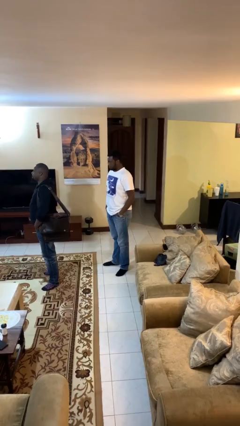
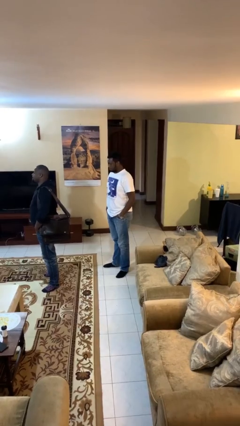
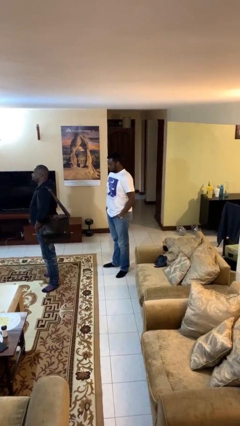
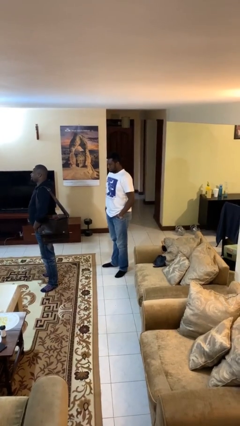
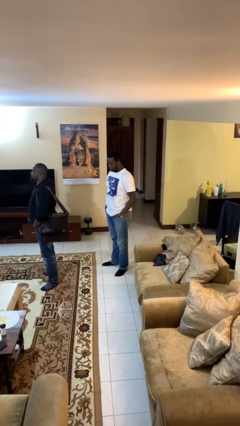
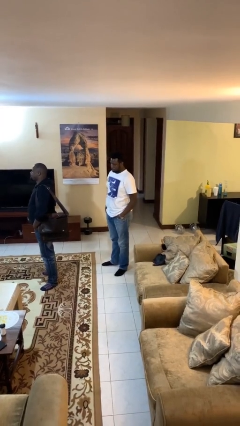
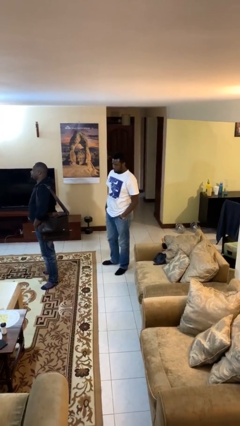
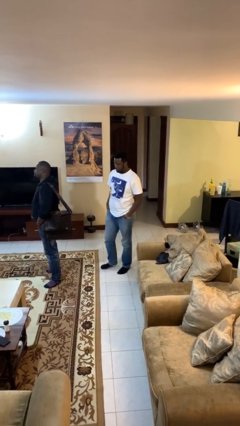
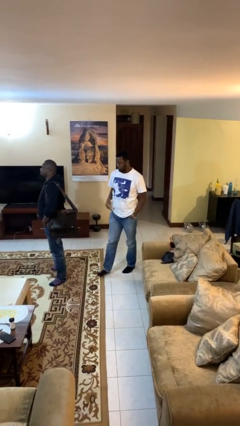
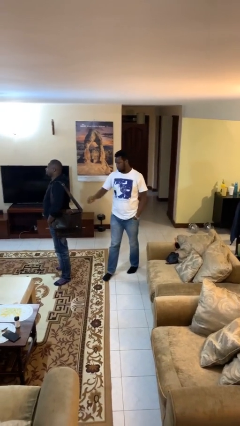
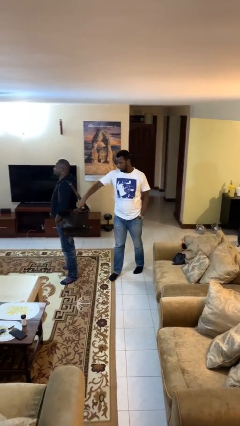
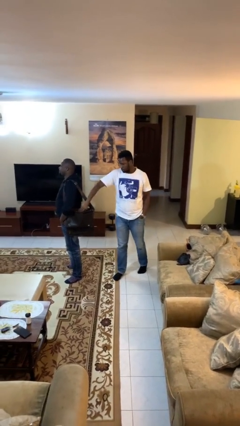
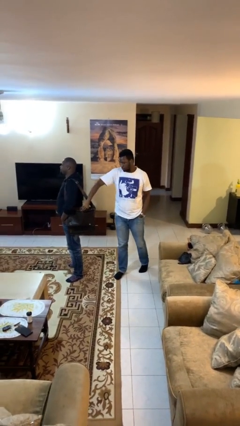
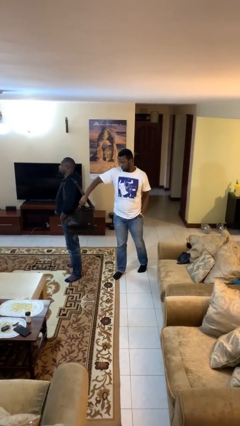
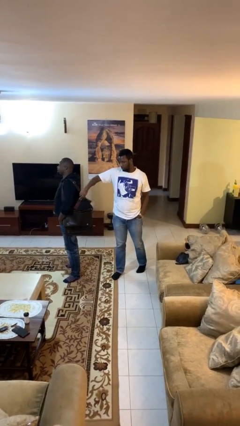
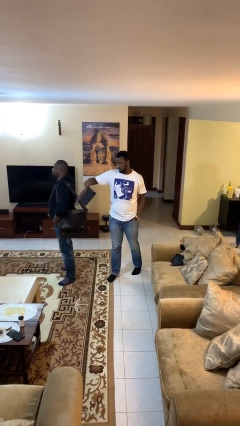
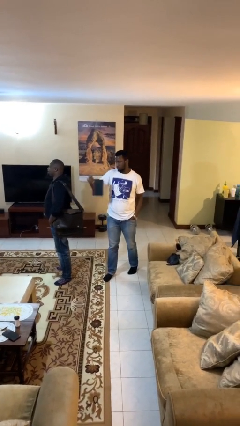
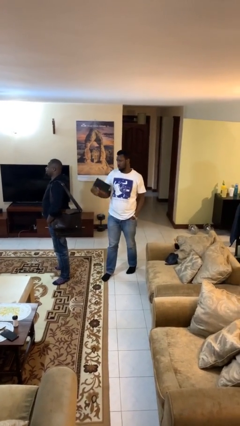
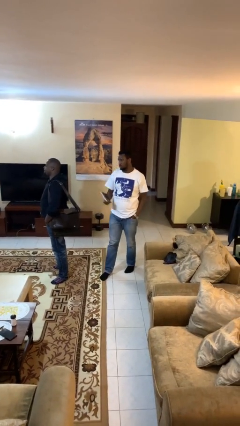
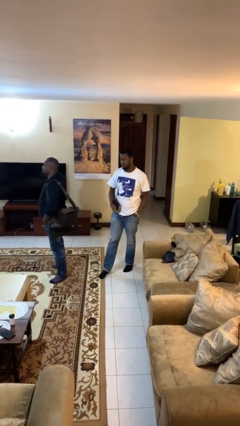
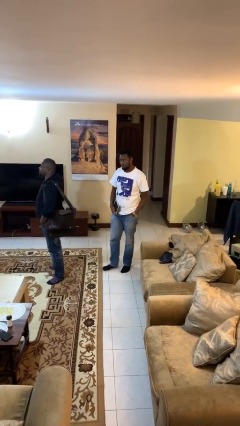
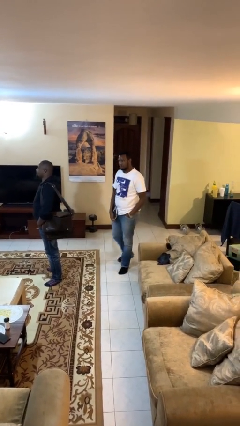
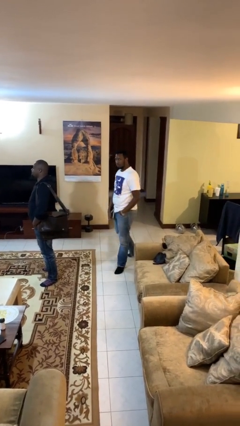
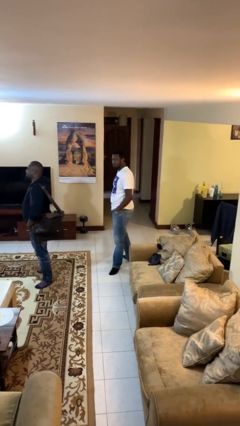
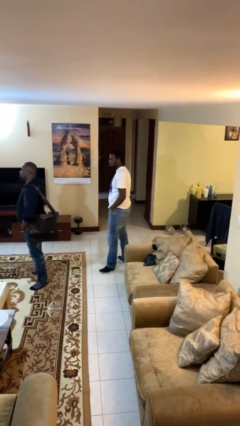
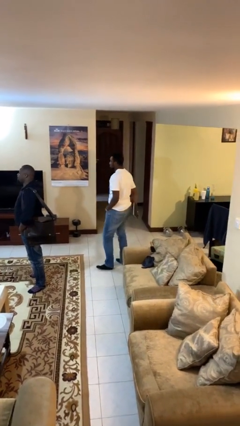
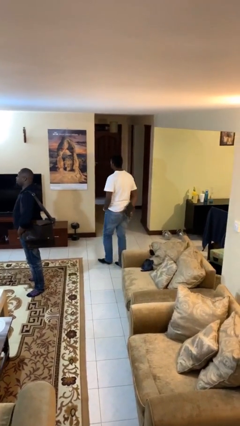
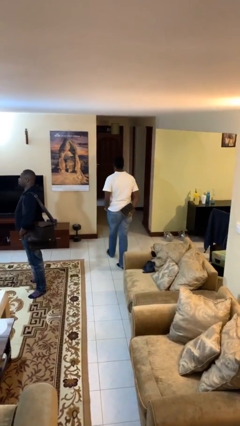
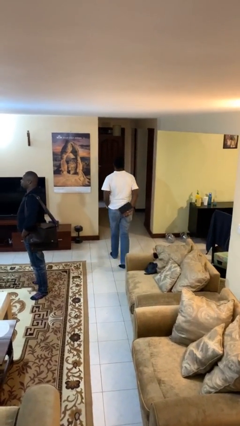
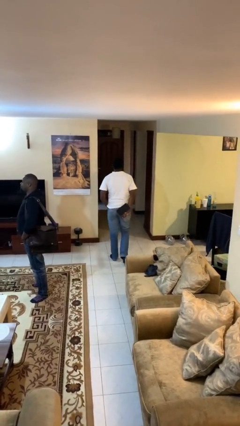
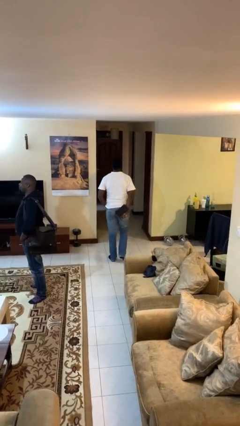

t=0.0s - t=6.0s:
person steals object from person

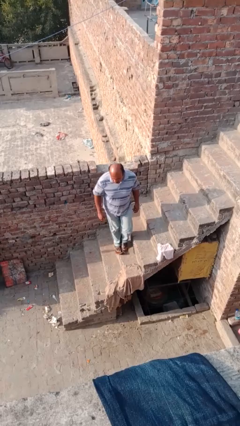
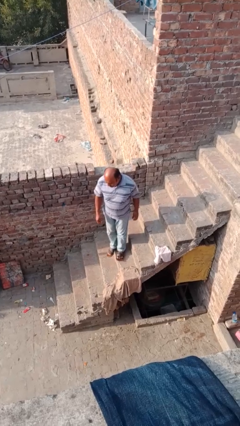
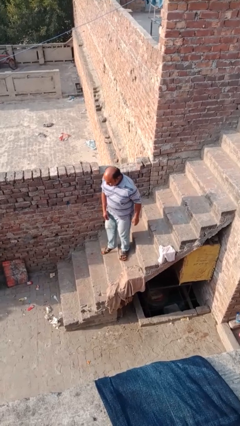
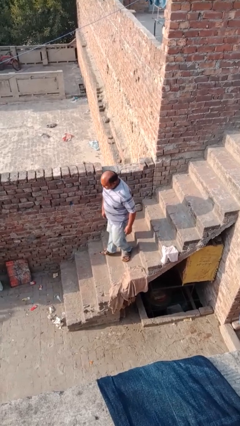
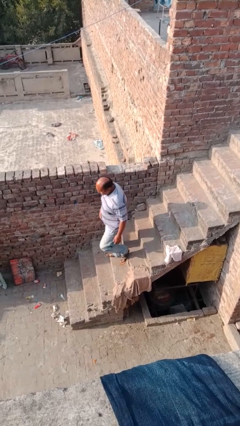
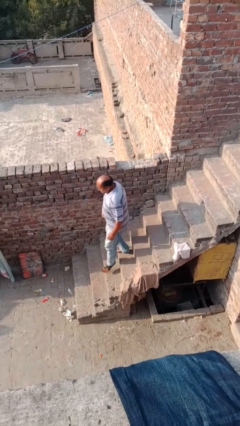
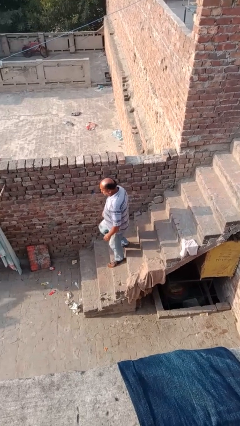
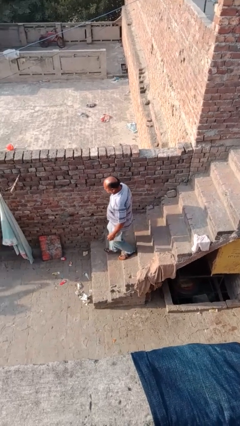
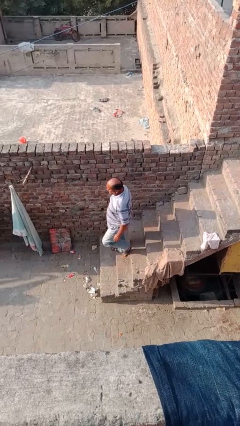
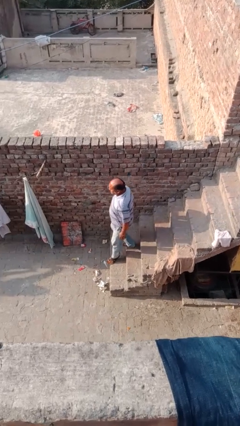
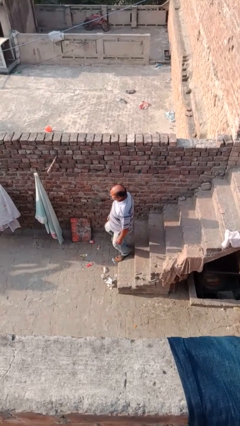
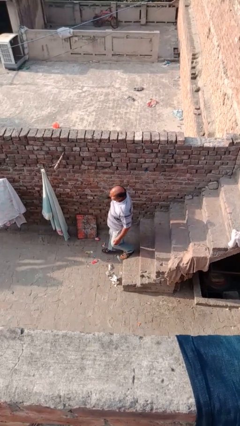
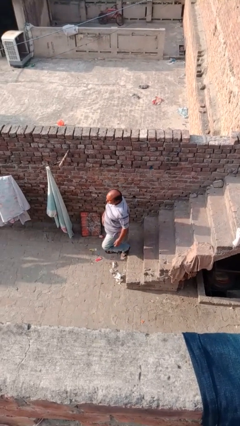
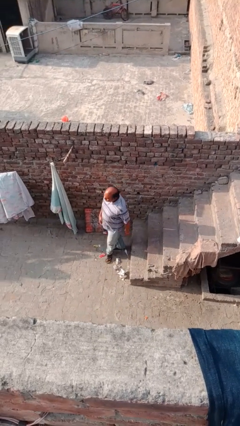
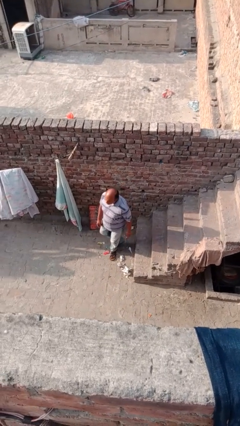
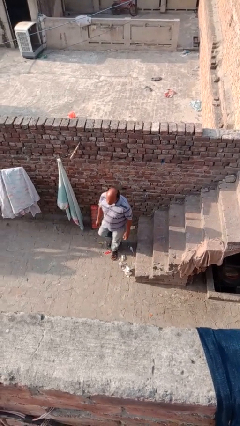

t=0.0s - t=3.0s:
person climbs down stairs

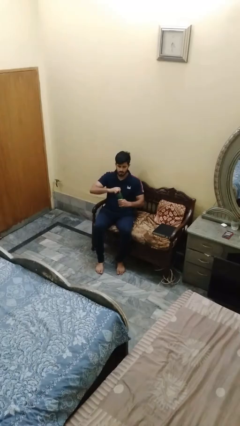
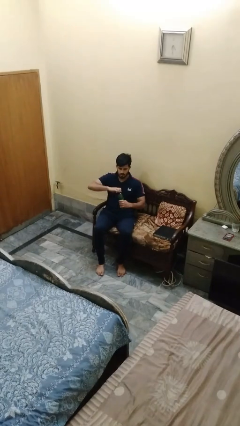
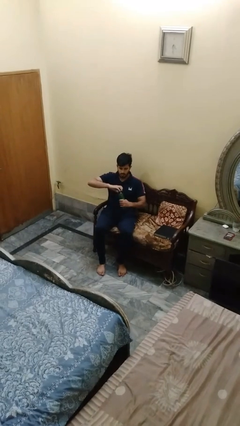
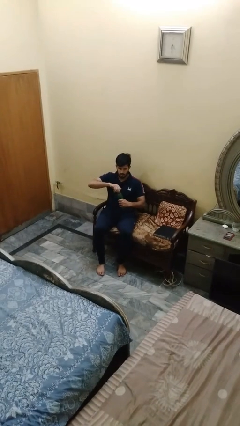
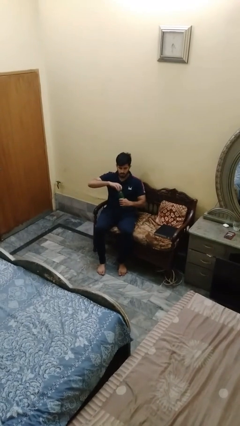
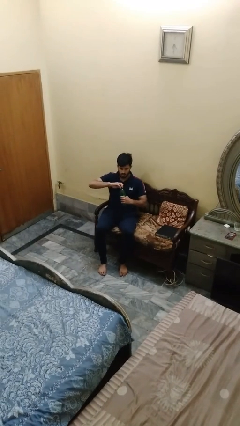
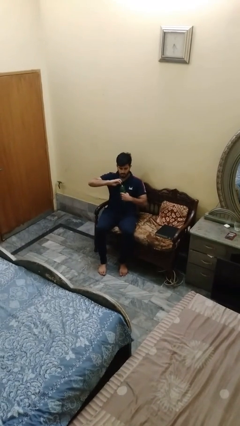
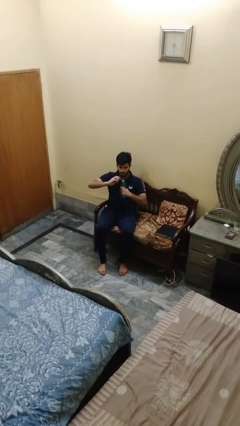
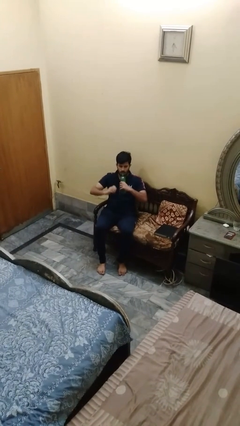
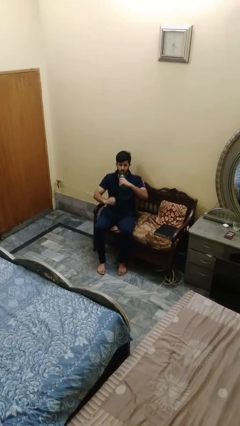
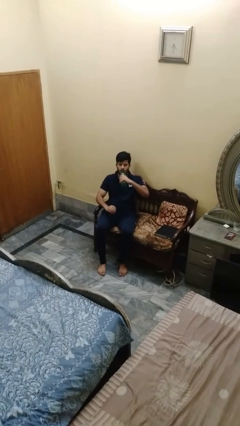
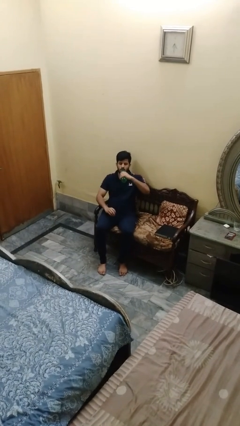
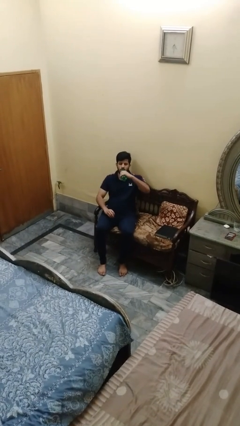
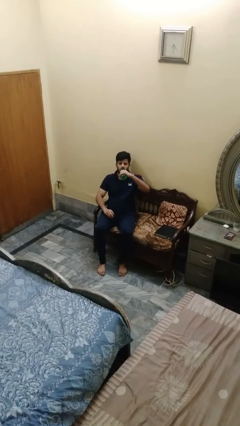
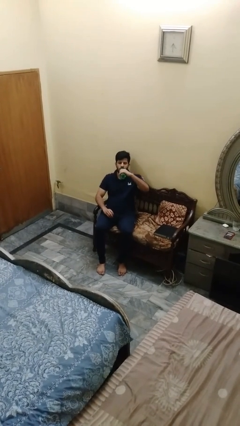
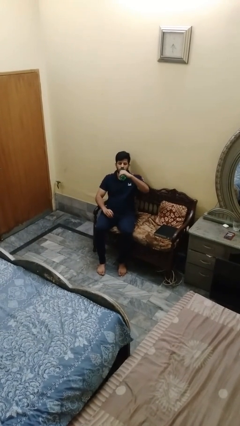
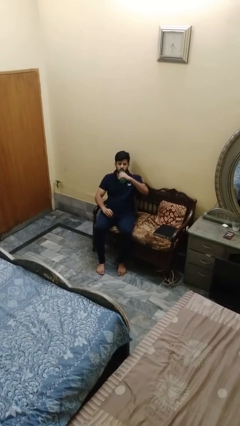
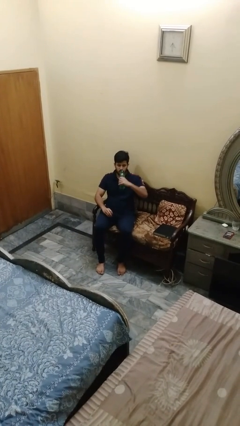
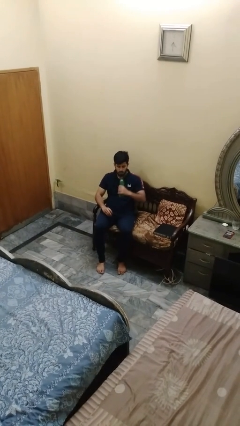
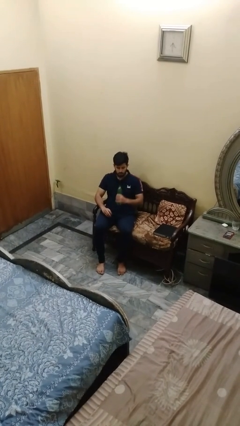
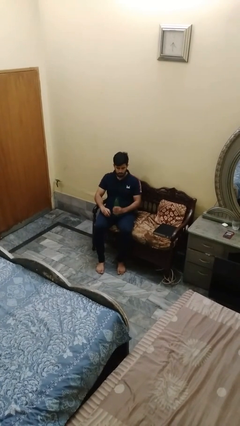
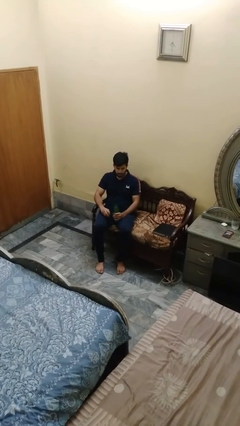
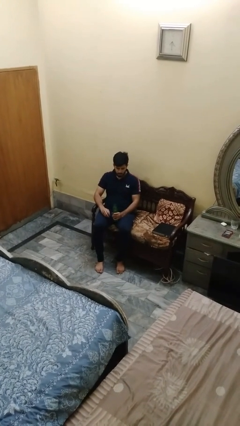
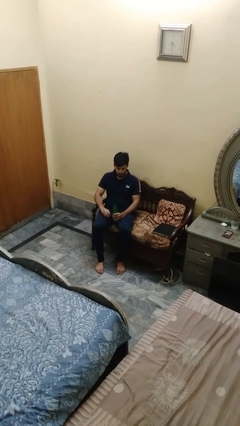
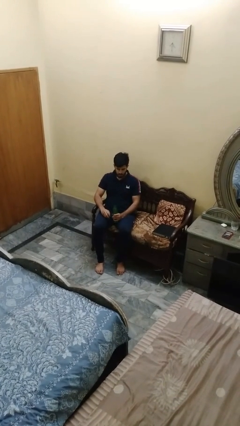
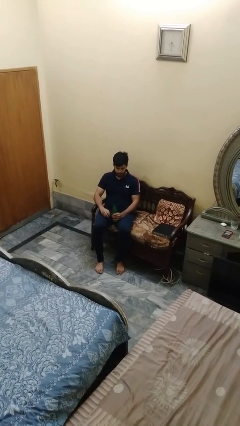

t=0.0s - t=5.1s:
person drinks from bottle

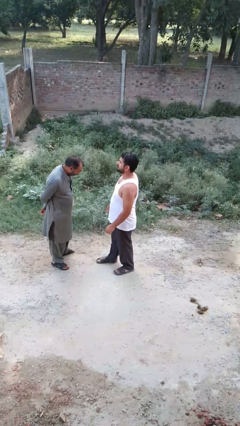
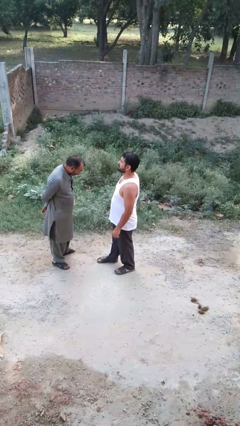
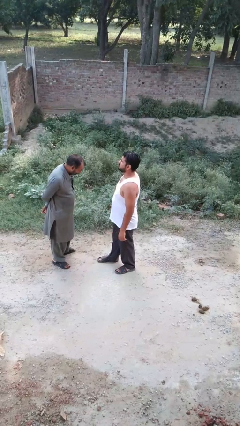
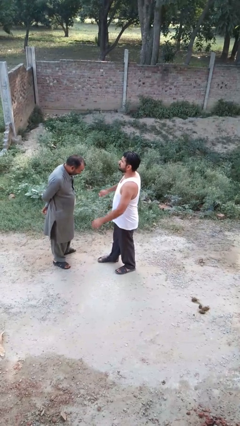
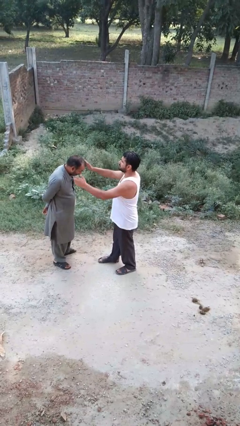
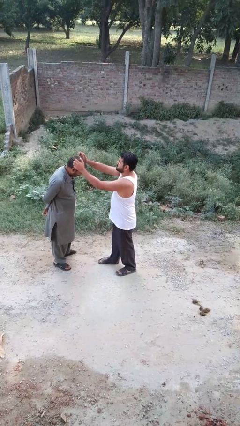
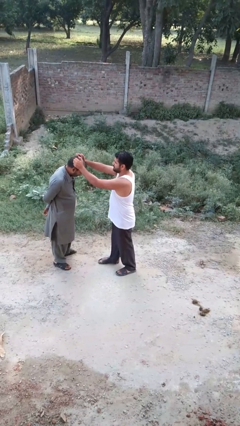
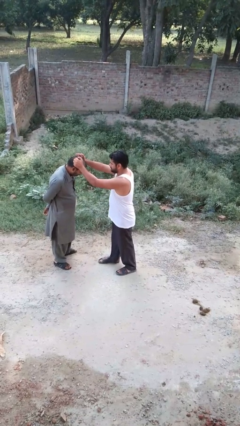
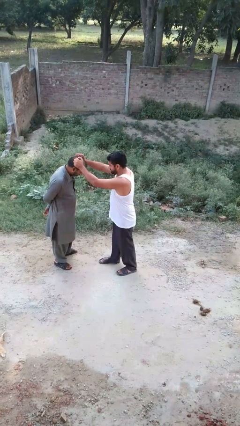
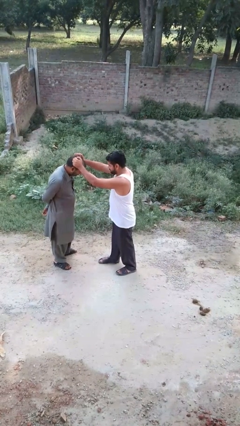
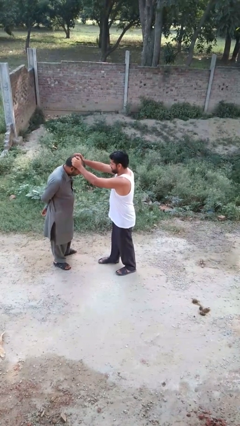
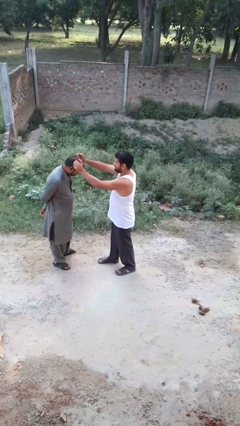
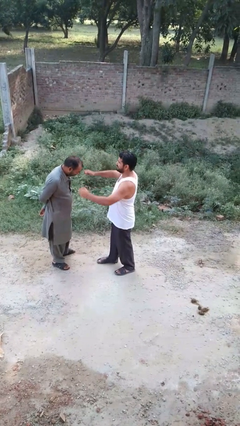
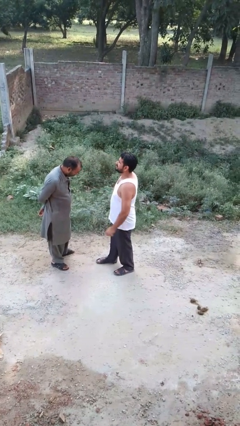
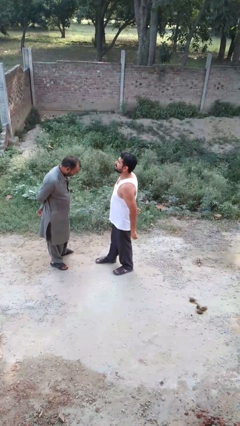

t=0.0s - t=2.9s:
person grabs person by hair

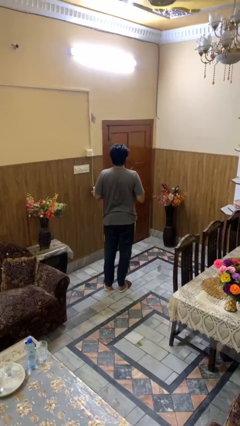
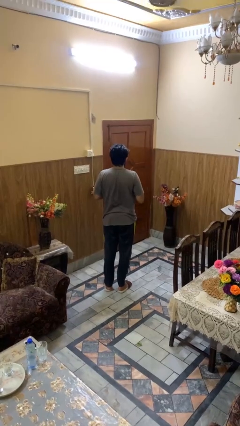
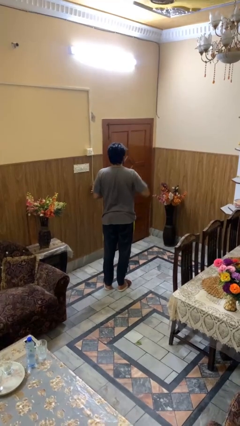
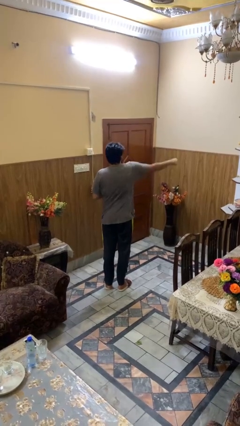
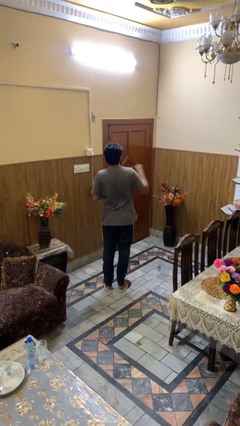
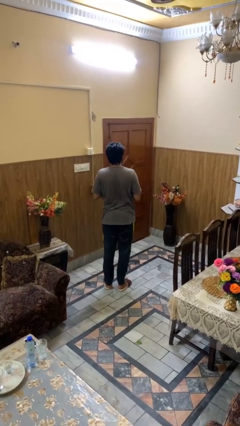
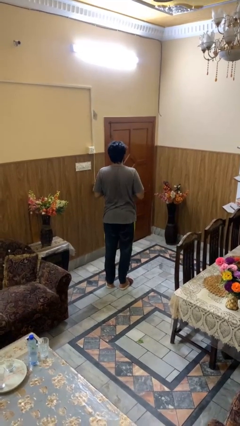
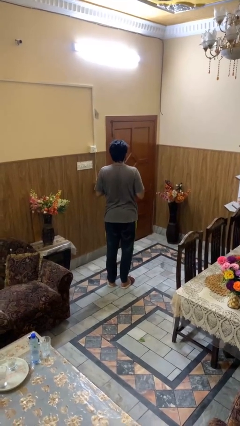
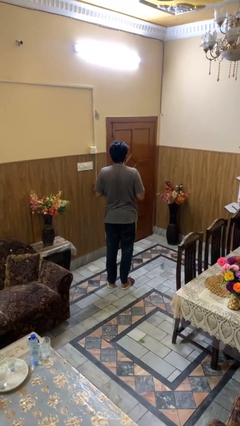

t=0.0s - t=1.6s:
person karate chop
